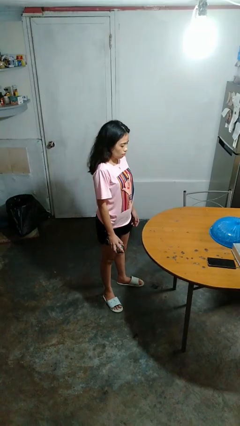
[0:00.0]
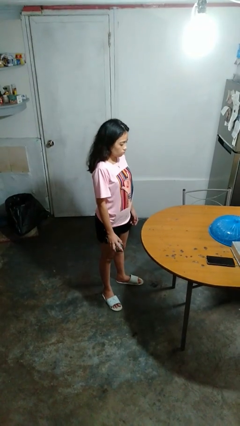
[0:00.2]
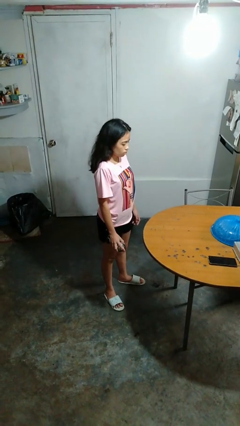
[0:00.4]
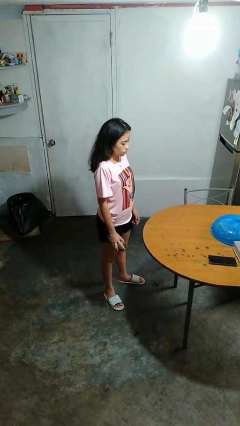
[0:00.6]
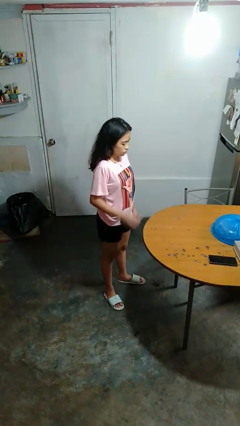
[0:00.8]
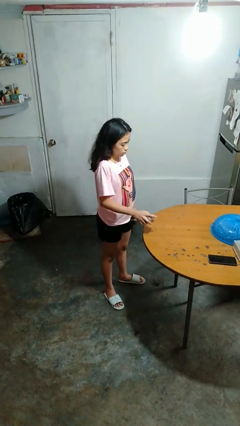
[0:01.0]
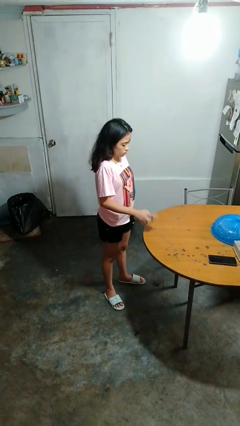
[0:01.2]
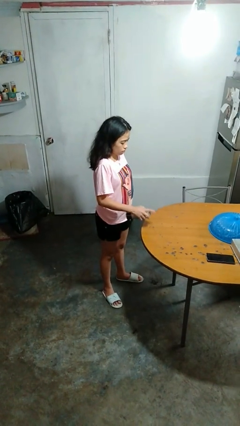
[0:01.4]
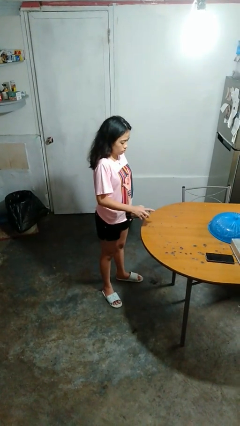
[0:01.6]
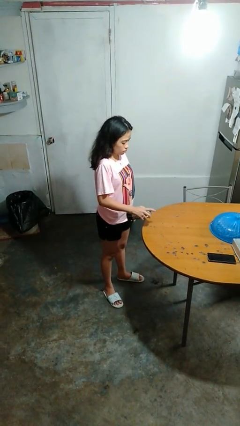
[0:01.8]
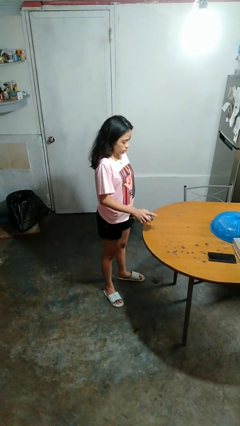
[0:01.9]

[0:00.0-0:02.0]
person sprays from bottle

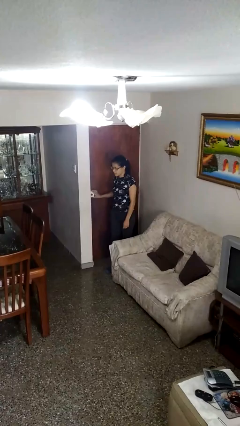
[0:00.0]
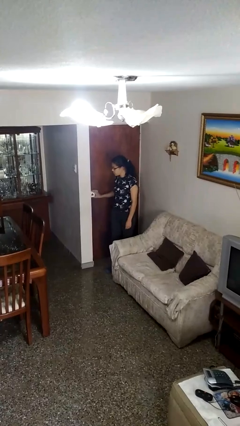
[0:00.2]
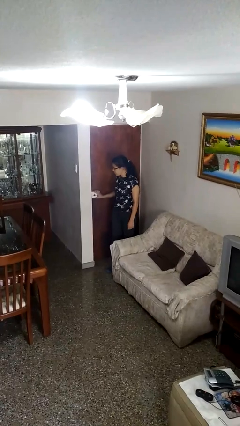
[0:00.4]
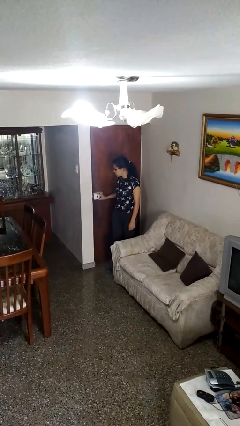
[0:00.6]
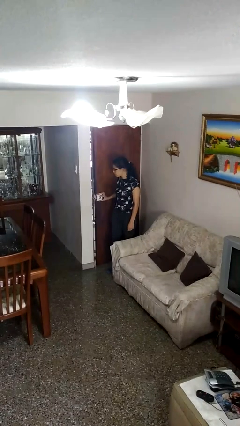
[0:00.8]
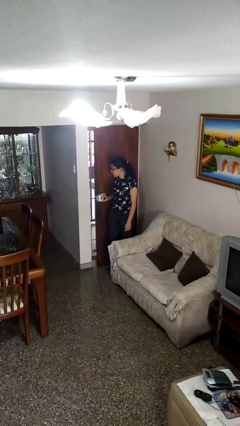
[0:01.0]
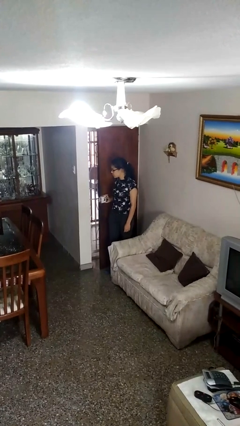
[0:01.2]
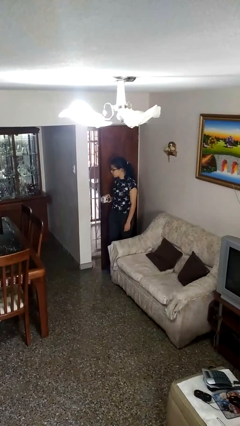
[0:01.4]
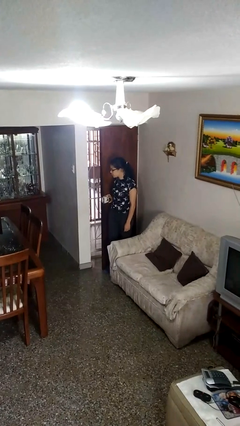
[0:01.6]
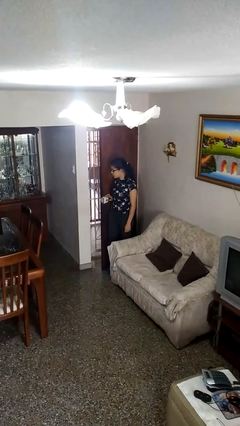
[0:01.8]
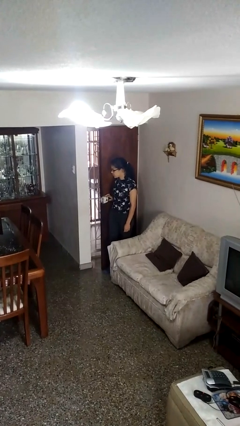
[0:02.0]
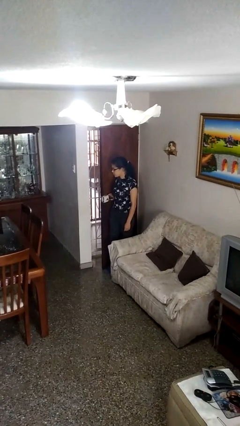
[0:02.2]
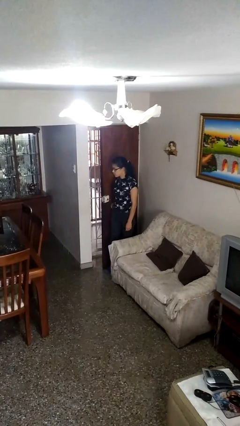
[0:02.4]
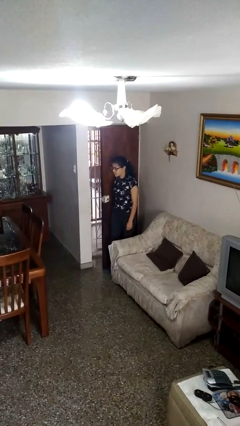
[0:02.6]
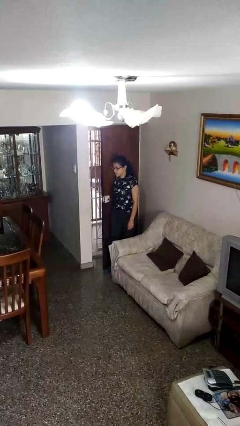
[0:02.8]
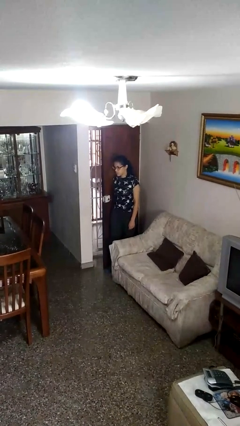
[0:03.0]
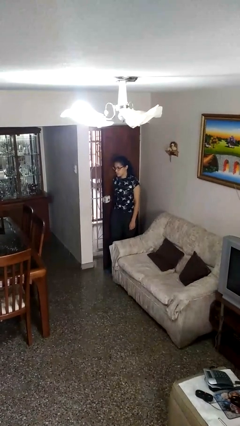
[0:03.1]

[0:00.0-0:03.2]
person opens facility door

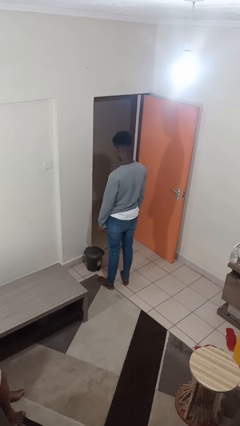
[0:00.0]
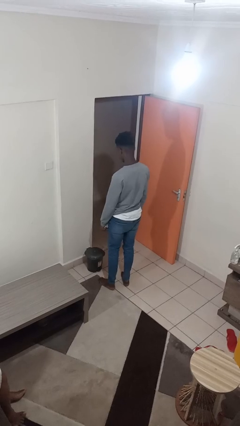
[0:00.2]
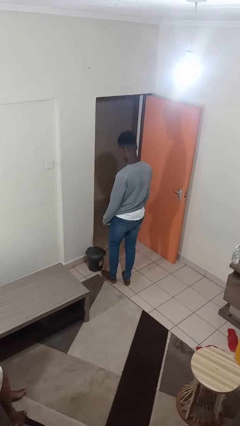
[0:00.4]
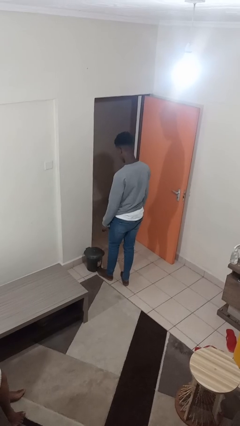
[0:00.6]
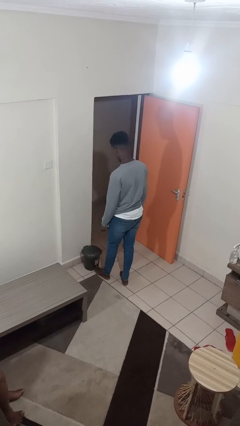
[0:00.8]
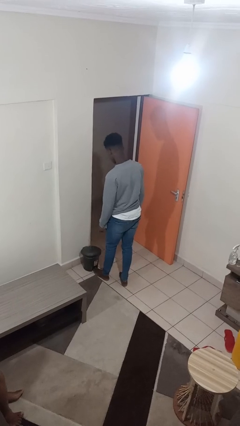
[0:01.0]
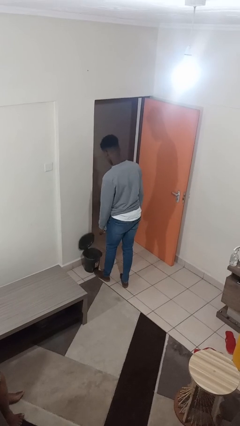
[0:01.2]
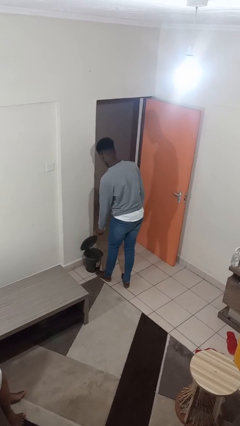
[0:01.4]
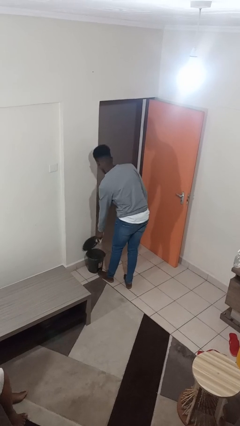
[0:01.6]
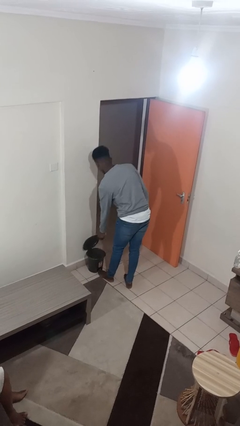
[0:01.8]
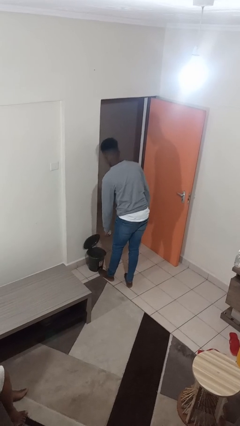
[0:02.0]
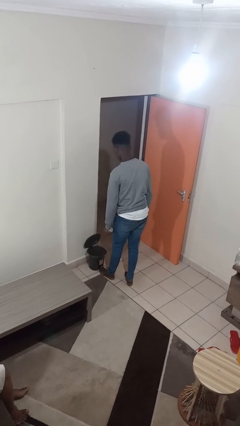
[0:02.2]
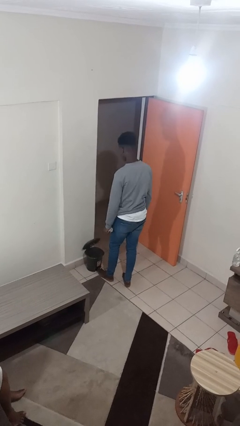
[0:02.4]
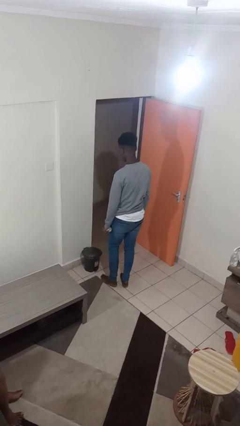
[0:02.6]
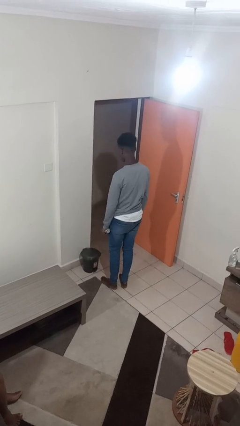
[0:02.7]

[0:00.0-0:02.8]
person discards trash

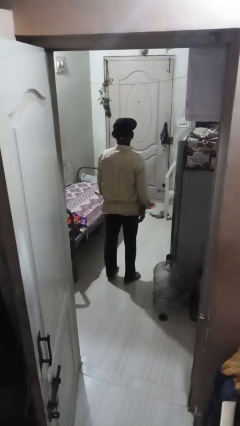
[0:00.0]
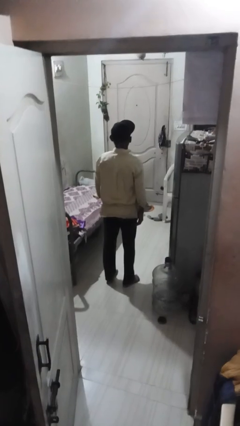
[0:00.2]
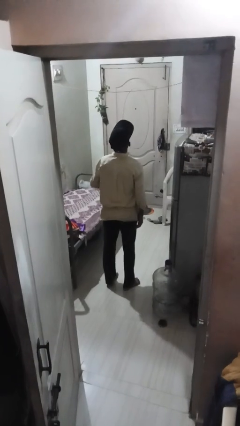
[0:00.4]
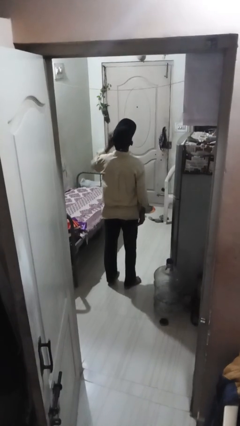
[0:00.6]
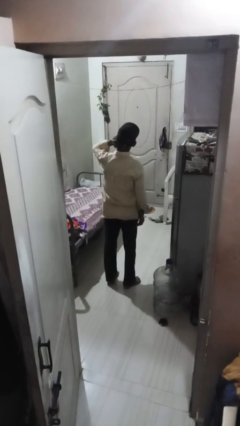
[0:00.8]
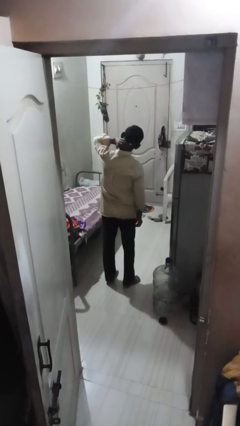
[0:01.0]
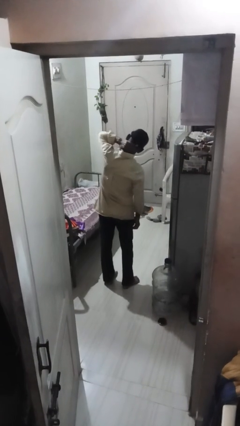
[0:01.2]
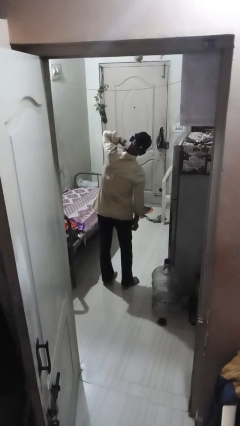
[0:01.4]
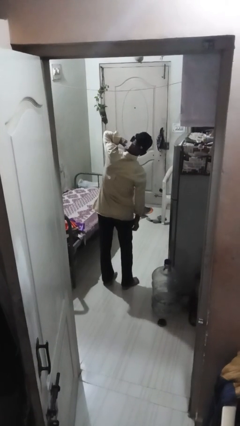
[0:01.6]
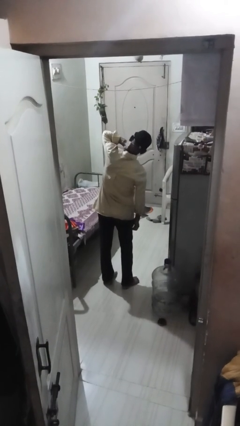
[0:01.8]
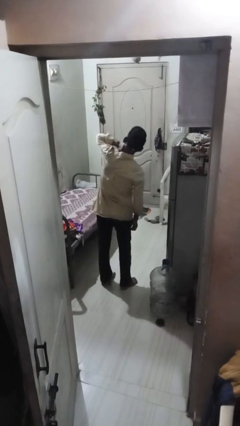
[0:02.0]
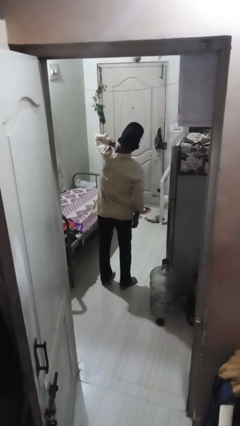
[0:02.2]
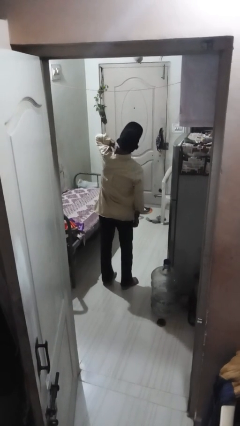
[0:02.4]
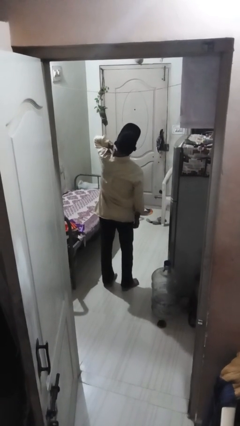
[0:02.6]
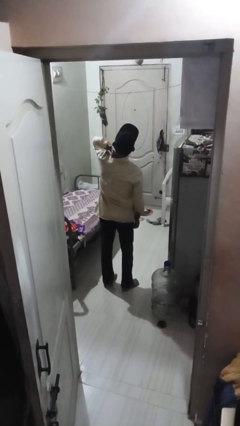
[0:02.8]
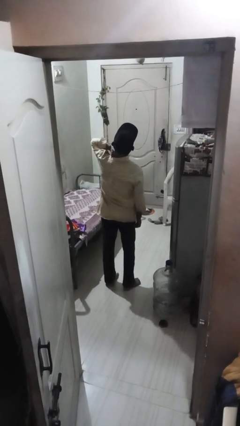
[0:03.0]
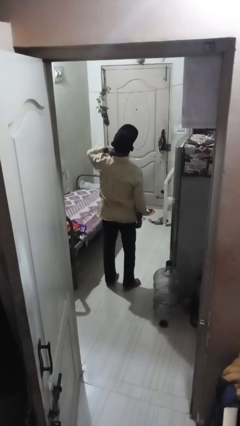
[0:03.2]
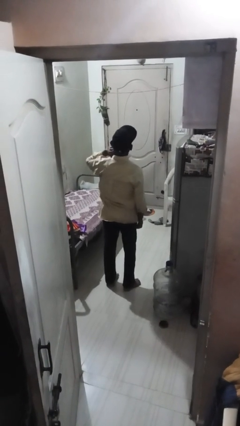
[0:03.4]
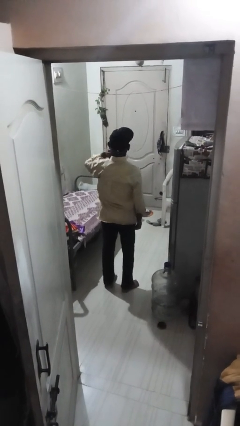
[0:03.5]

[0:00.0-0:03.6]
person rubs neck

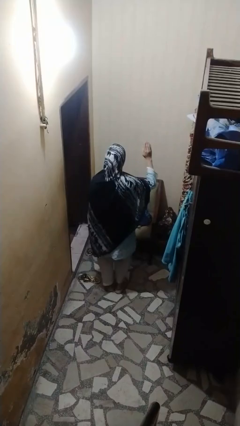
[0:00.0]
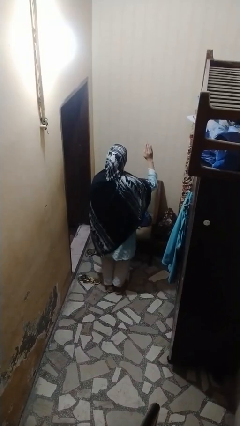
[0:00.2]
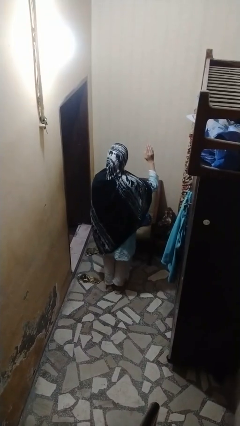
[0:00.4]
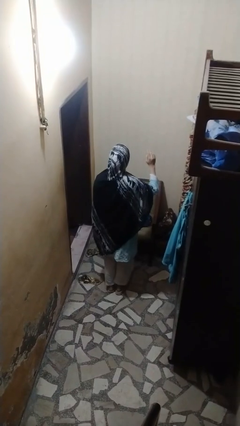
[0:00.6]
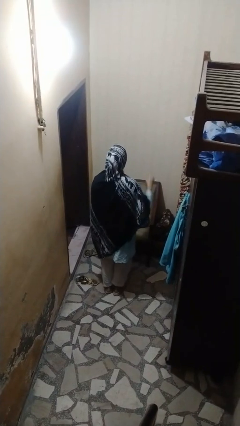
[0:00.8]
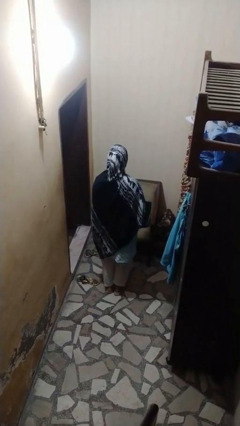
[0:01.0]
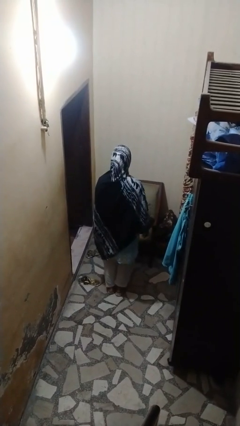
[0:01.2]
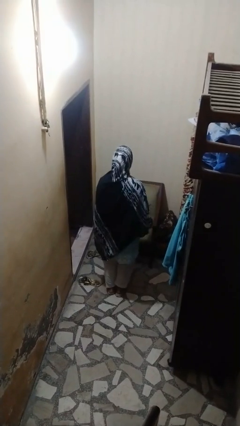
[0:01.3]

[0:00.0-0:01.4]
person salutes

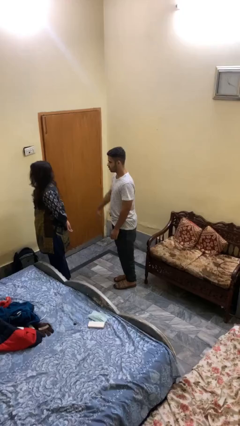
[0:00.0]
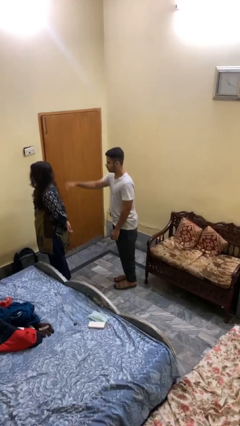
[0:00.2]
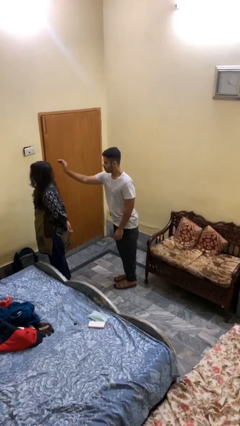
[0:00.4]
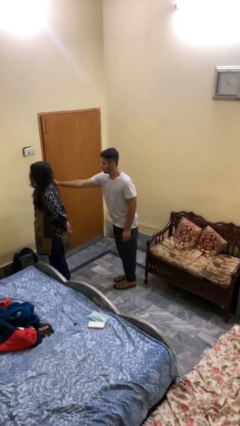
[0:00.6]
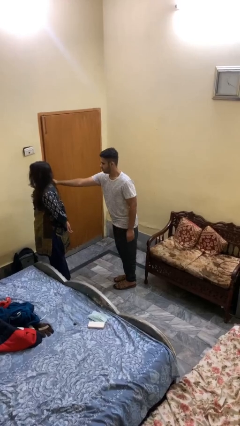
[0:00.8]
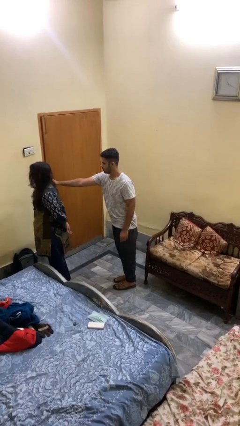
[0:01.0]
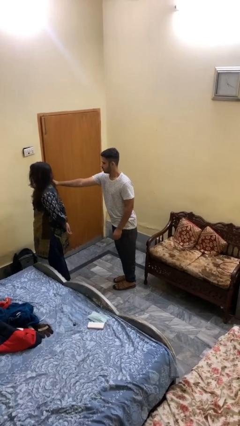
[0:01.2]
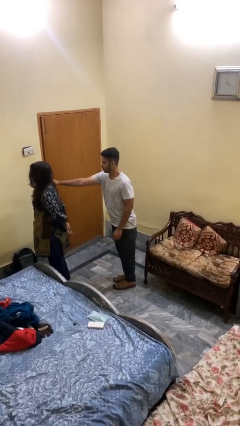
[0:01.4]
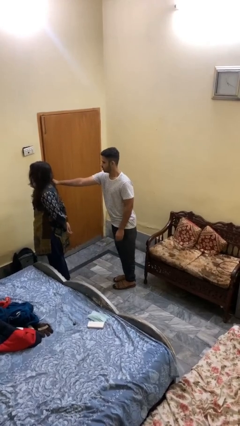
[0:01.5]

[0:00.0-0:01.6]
person grabs person by shoulder

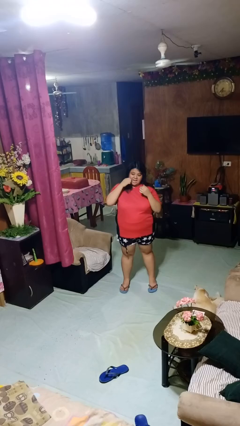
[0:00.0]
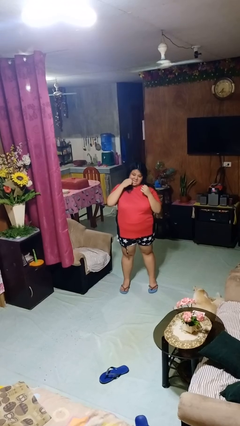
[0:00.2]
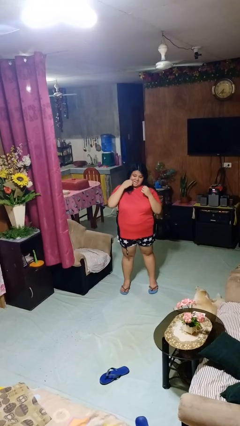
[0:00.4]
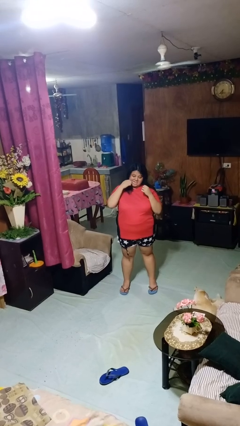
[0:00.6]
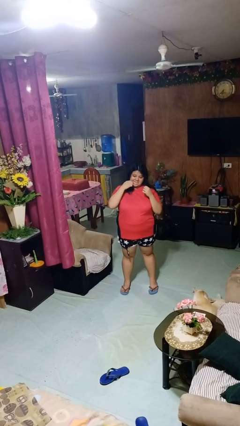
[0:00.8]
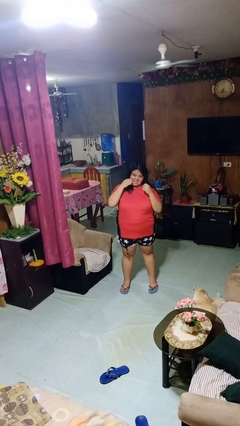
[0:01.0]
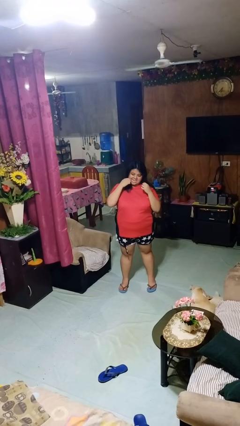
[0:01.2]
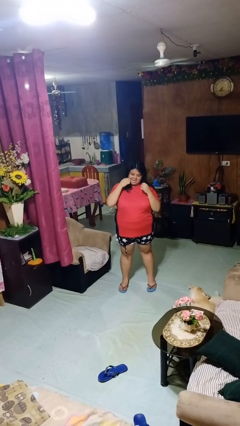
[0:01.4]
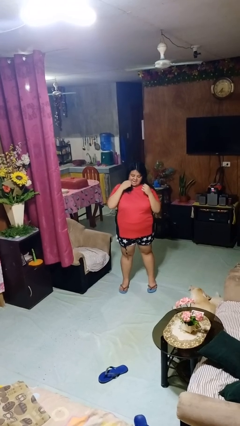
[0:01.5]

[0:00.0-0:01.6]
person flosses

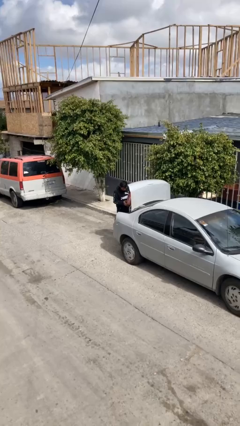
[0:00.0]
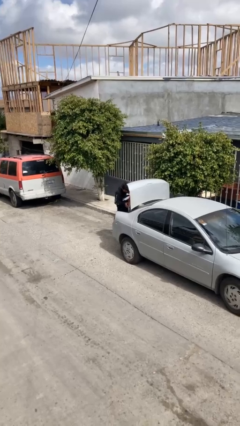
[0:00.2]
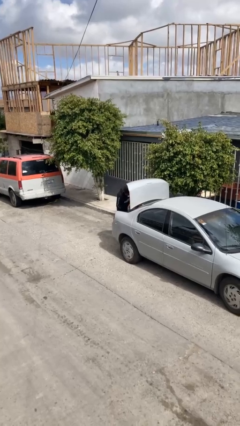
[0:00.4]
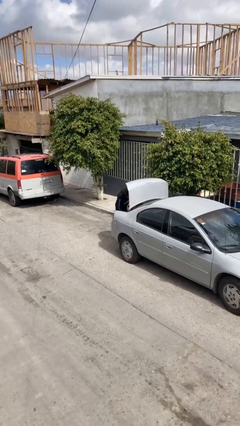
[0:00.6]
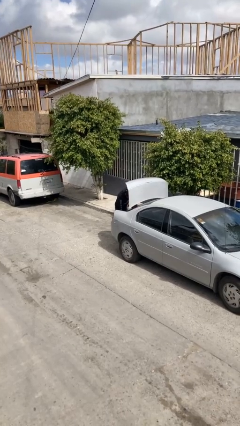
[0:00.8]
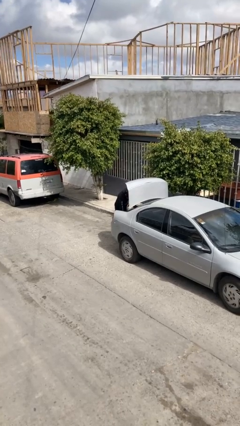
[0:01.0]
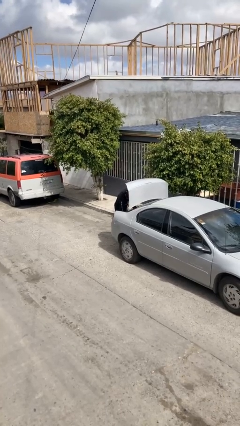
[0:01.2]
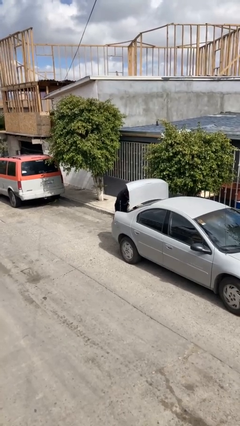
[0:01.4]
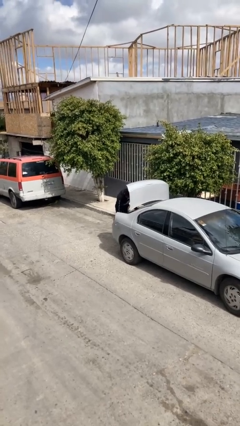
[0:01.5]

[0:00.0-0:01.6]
person loads car
